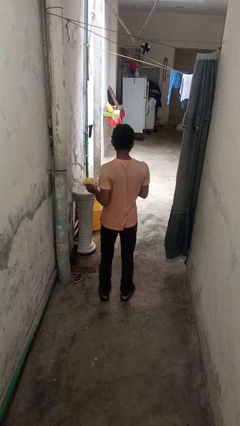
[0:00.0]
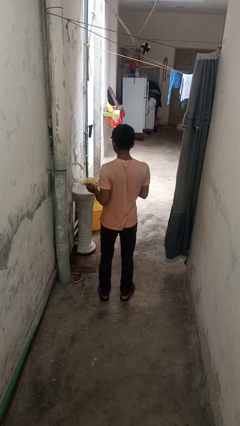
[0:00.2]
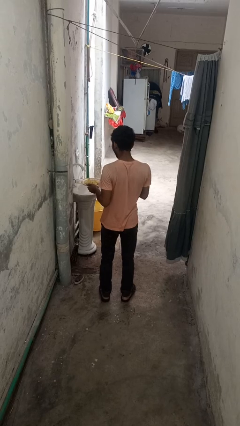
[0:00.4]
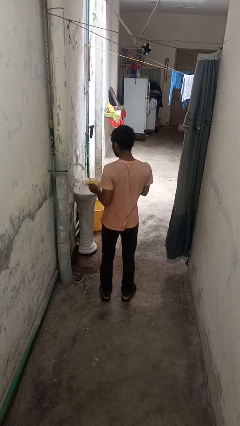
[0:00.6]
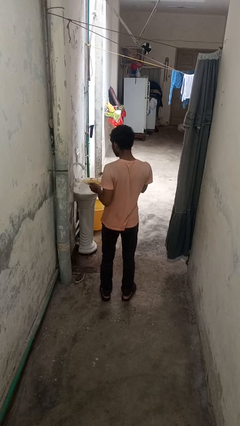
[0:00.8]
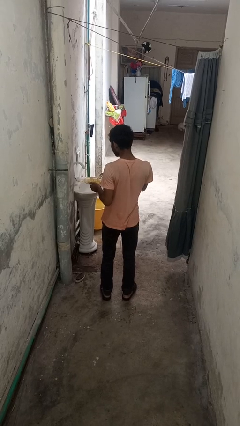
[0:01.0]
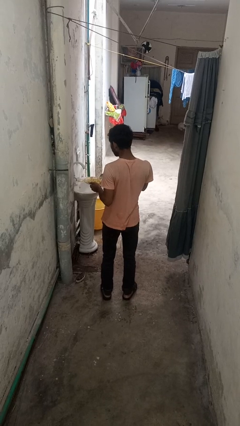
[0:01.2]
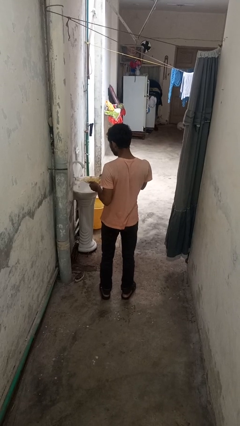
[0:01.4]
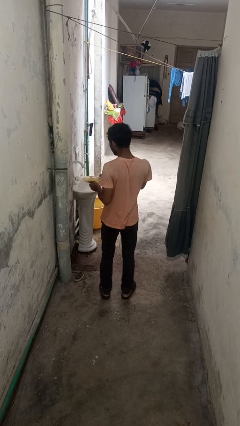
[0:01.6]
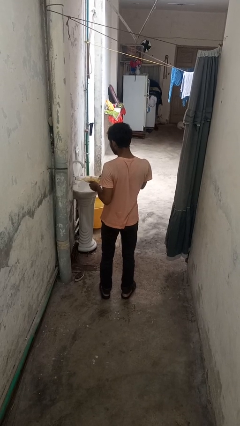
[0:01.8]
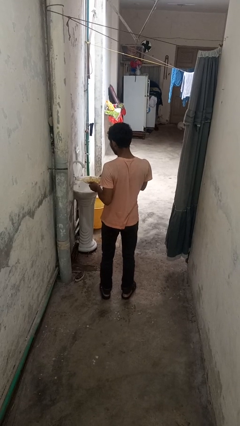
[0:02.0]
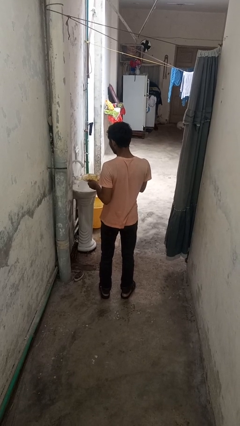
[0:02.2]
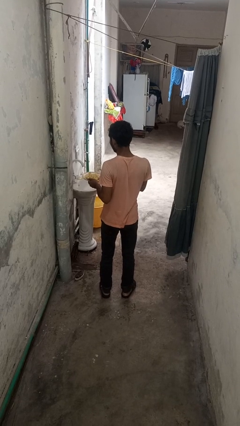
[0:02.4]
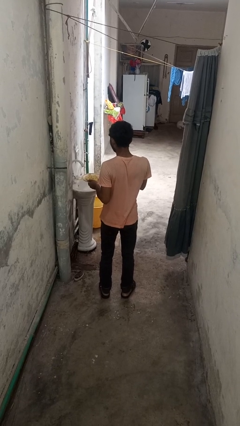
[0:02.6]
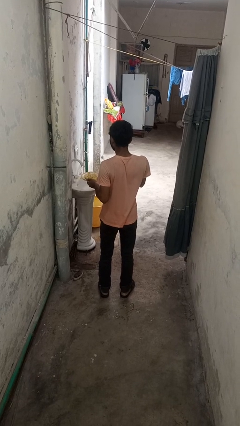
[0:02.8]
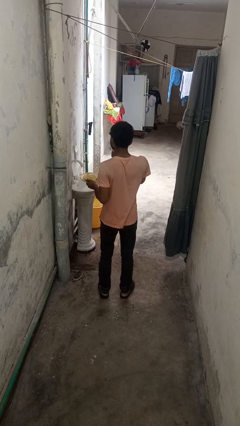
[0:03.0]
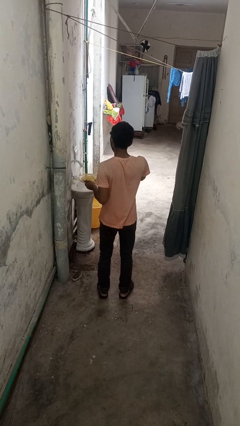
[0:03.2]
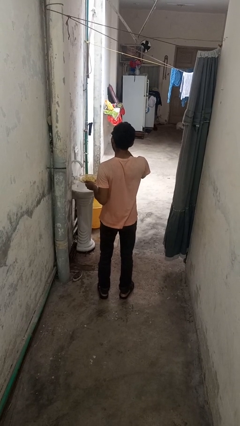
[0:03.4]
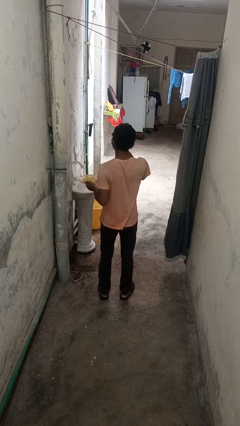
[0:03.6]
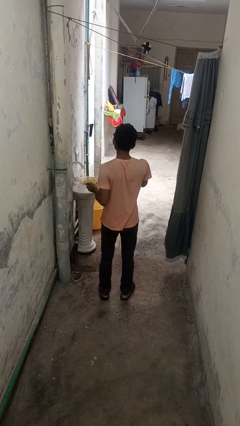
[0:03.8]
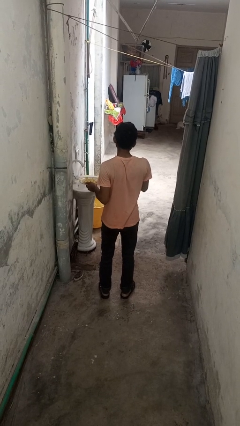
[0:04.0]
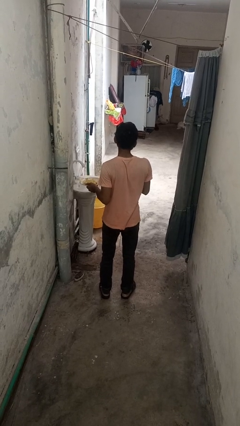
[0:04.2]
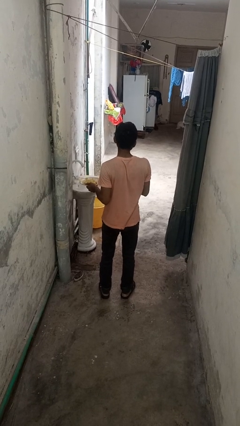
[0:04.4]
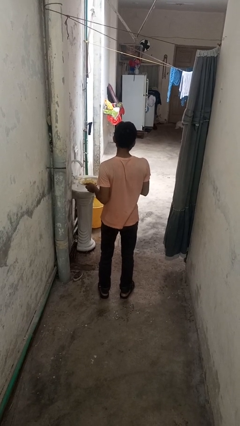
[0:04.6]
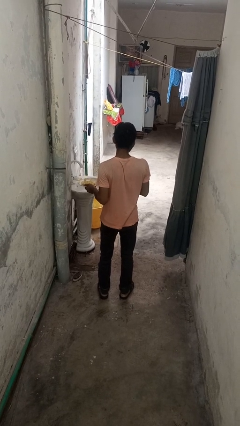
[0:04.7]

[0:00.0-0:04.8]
person eats with utensil

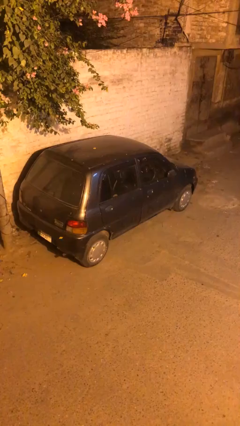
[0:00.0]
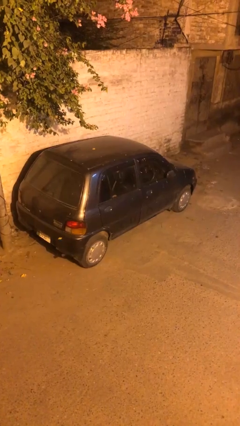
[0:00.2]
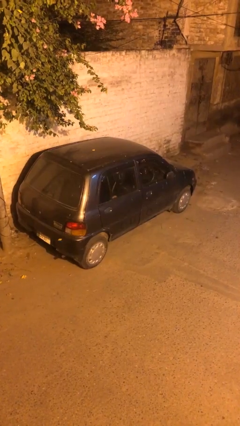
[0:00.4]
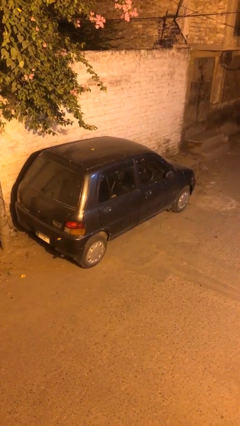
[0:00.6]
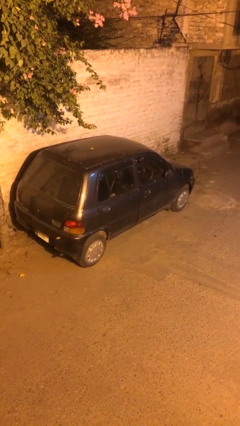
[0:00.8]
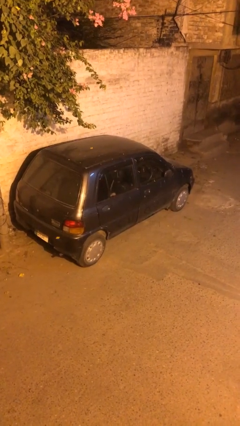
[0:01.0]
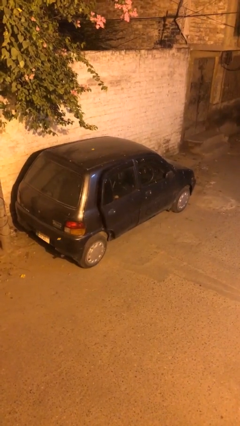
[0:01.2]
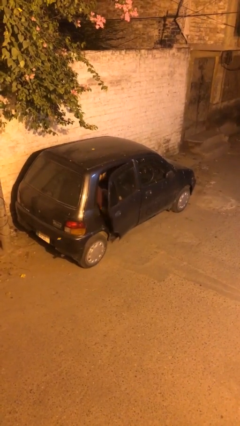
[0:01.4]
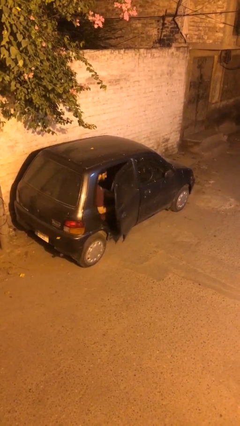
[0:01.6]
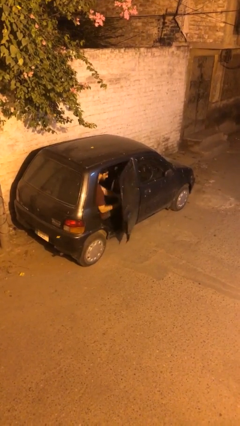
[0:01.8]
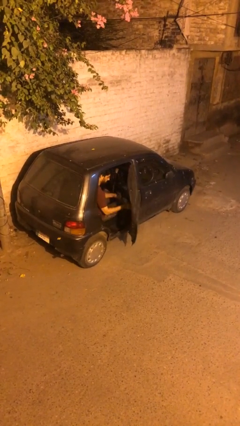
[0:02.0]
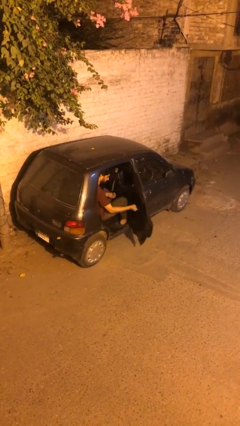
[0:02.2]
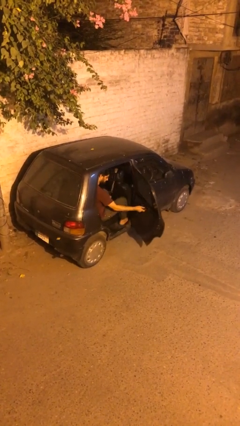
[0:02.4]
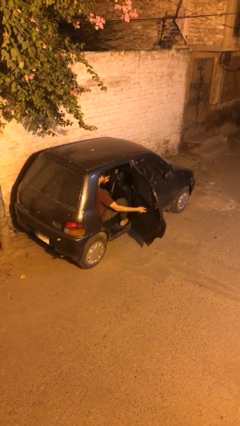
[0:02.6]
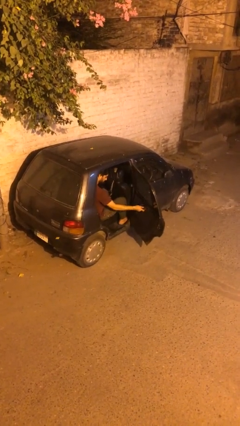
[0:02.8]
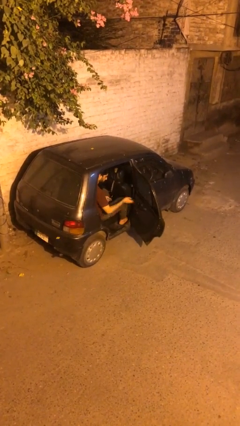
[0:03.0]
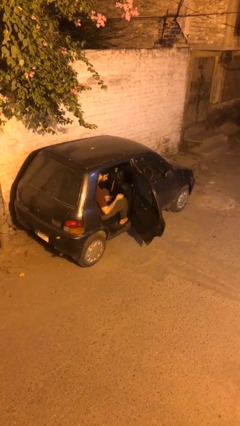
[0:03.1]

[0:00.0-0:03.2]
person opens car door

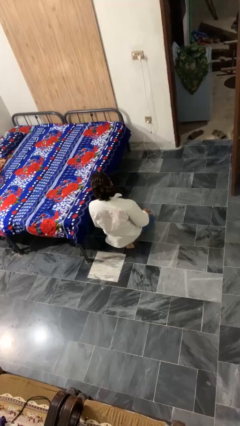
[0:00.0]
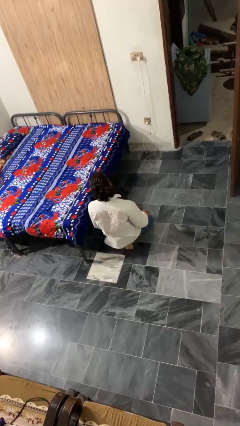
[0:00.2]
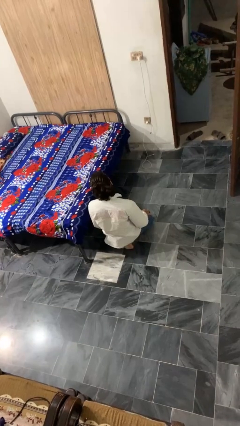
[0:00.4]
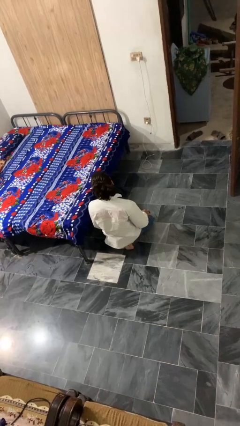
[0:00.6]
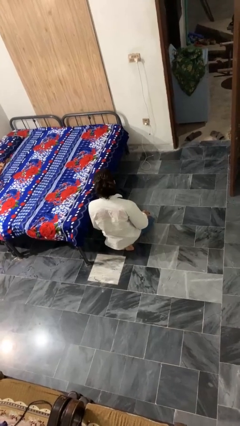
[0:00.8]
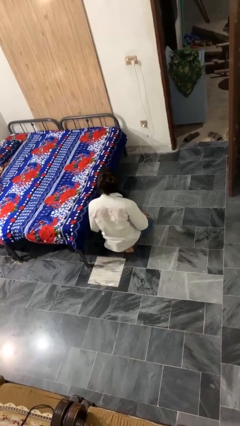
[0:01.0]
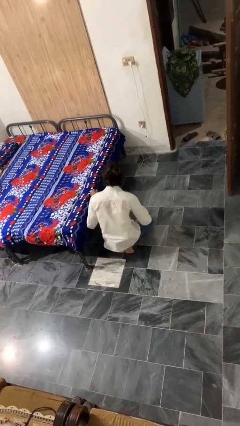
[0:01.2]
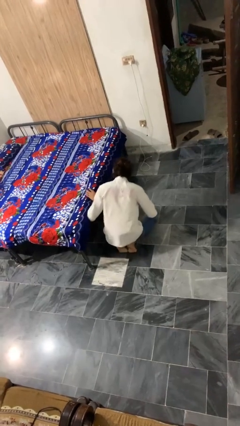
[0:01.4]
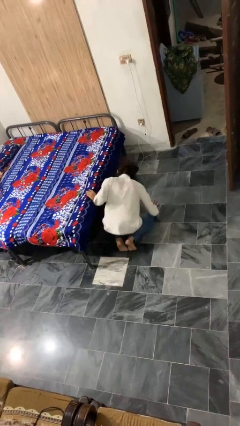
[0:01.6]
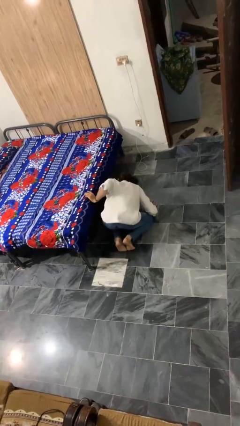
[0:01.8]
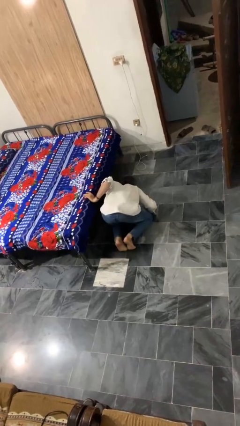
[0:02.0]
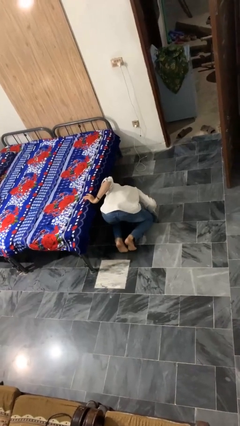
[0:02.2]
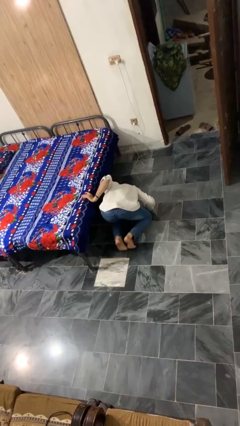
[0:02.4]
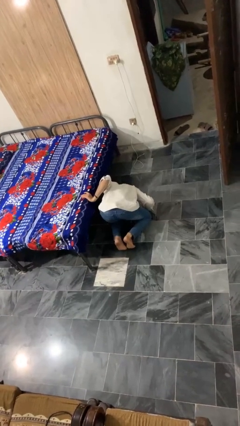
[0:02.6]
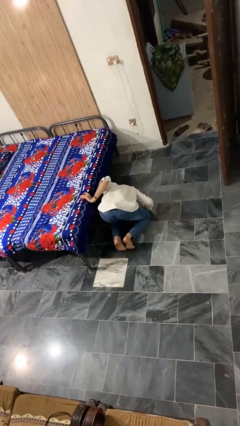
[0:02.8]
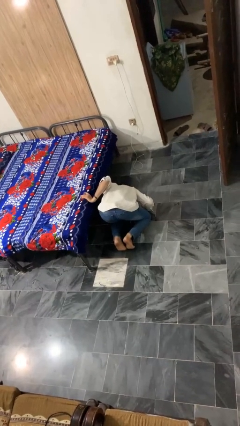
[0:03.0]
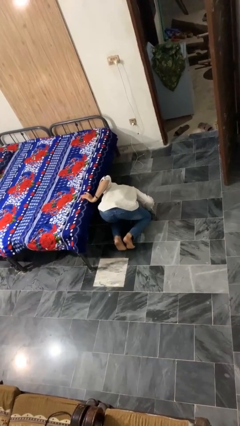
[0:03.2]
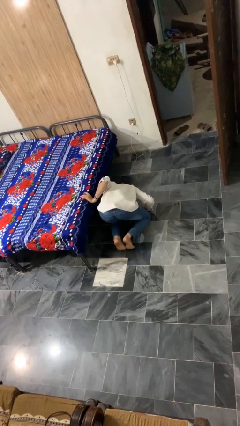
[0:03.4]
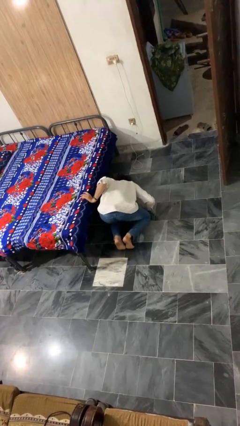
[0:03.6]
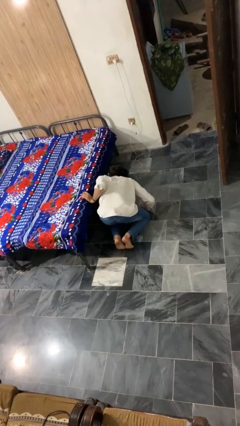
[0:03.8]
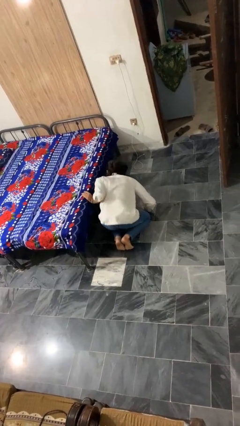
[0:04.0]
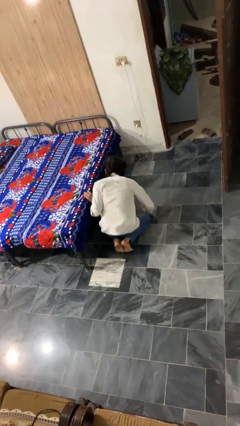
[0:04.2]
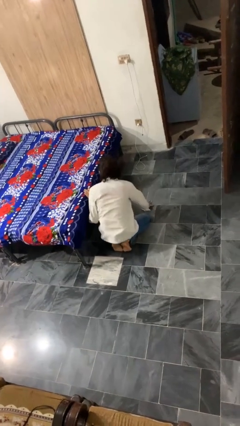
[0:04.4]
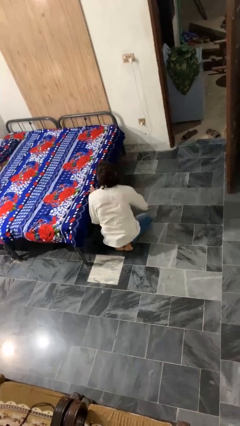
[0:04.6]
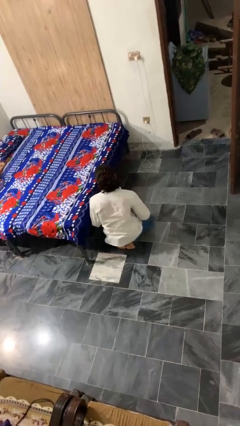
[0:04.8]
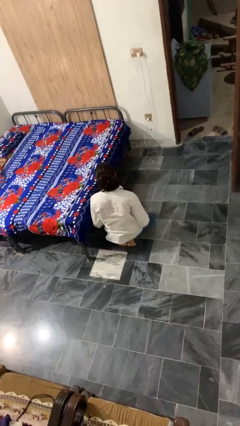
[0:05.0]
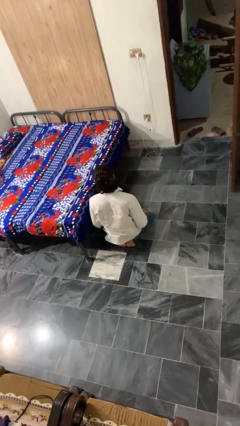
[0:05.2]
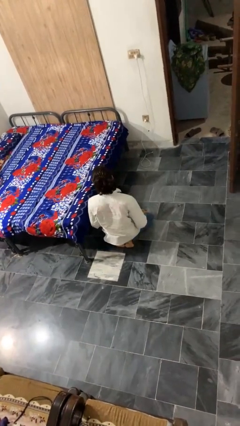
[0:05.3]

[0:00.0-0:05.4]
person searches under bed

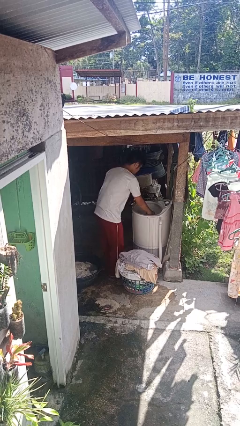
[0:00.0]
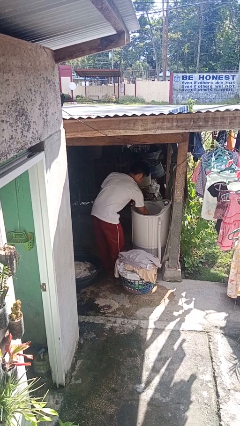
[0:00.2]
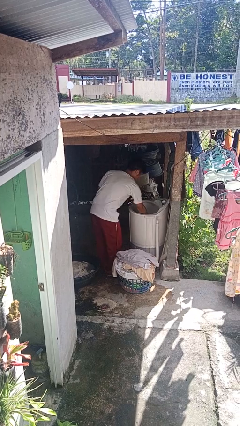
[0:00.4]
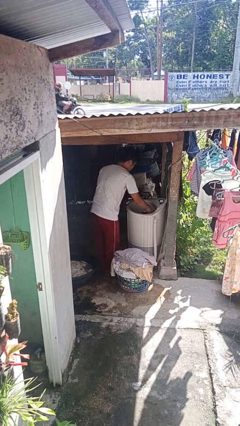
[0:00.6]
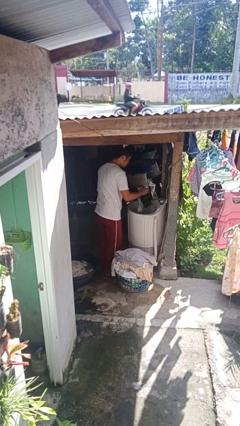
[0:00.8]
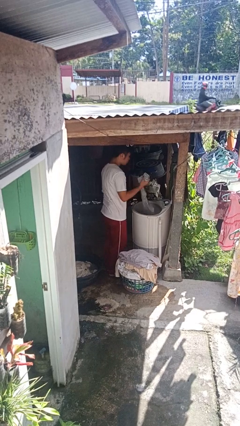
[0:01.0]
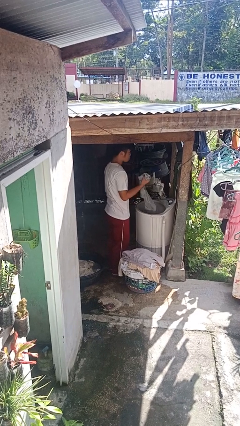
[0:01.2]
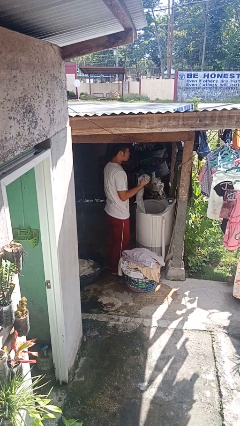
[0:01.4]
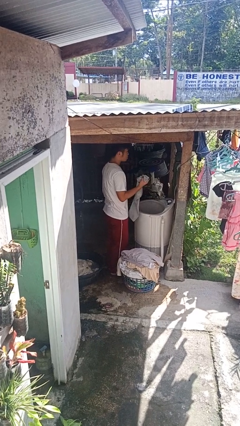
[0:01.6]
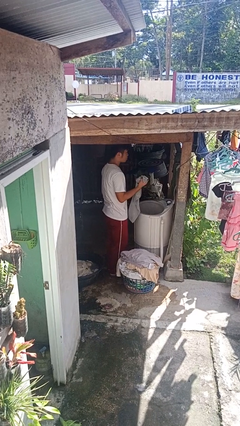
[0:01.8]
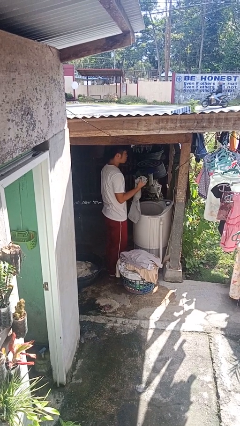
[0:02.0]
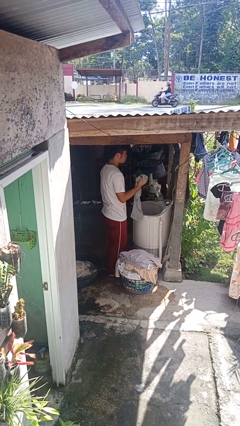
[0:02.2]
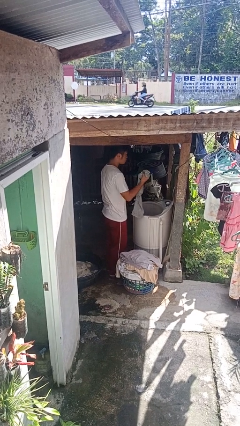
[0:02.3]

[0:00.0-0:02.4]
person unloads clotheswasher

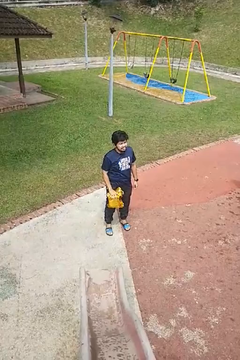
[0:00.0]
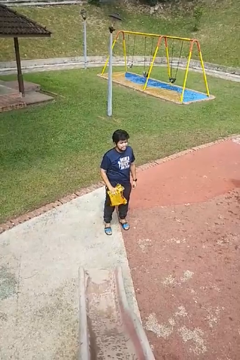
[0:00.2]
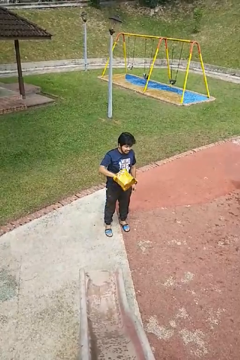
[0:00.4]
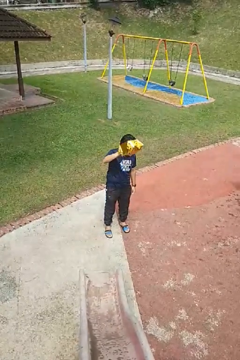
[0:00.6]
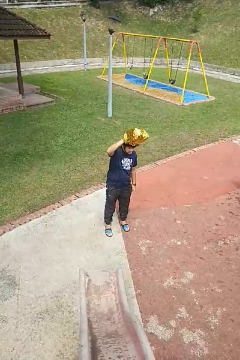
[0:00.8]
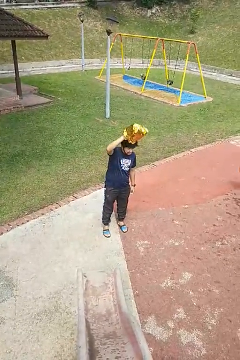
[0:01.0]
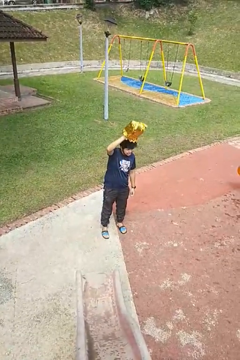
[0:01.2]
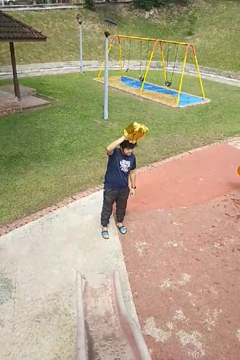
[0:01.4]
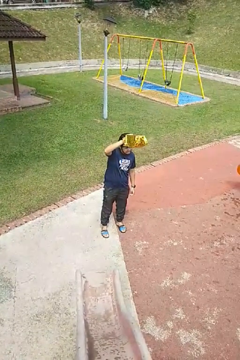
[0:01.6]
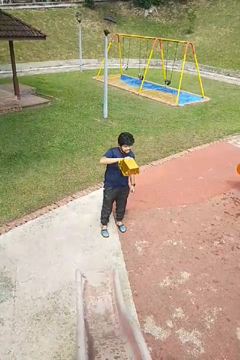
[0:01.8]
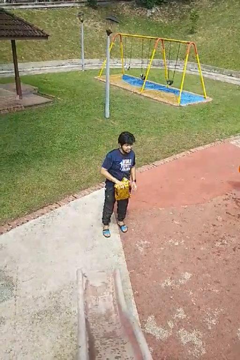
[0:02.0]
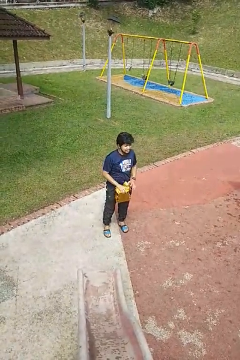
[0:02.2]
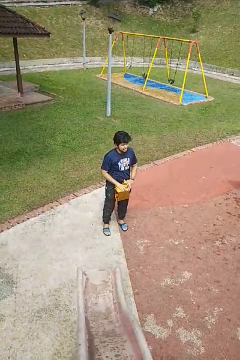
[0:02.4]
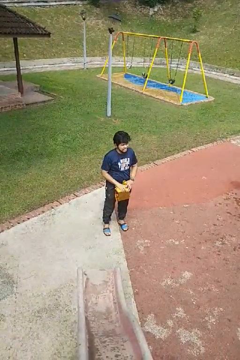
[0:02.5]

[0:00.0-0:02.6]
person holds object above head
